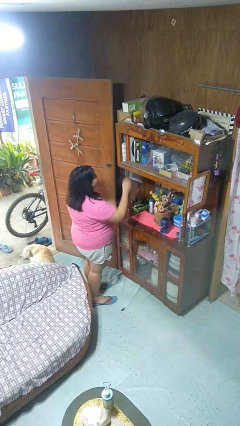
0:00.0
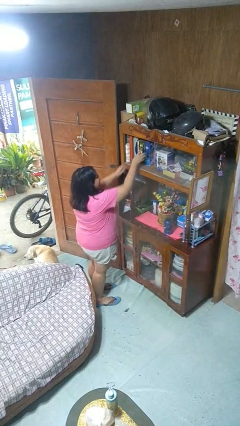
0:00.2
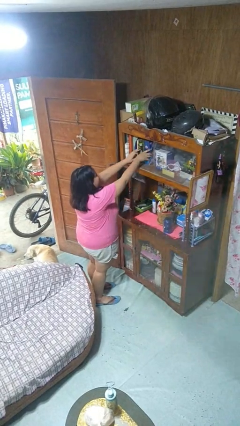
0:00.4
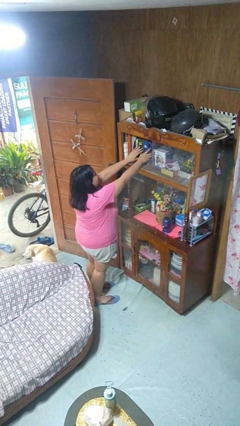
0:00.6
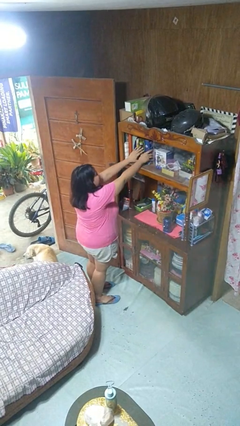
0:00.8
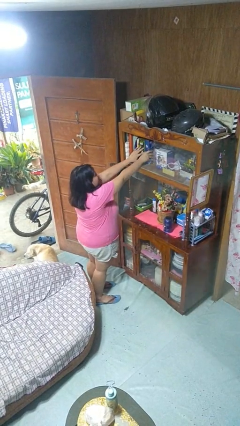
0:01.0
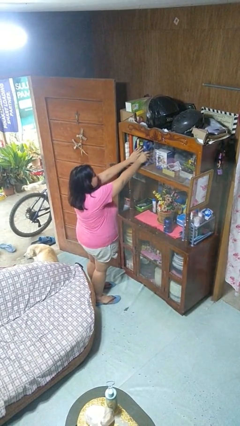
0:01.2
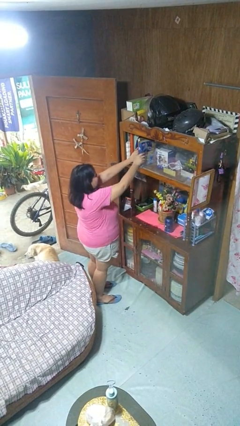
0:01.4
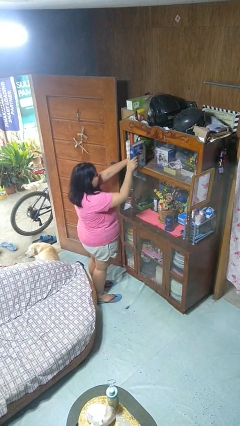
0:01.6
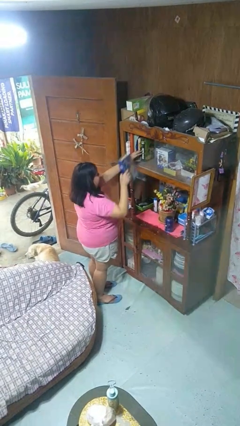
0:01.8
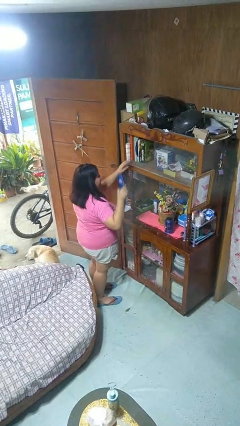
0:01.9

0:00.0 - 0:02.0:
person picks up object from shelf

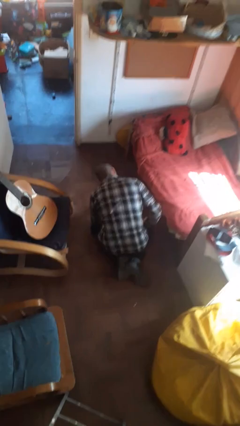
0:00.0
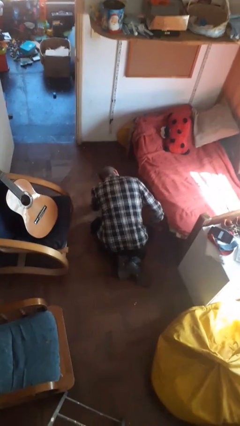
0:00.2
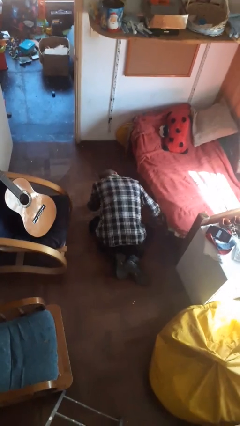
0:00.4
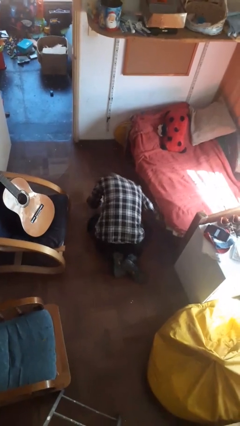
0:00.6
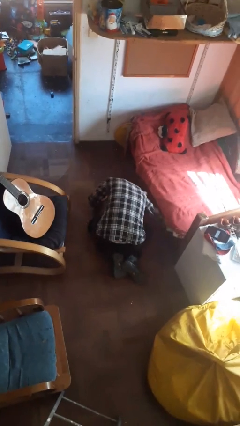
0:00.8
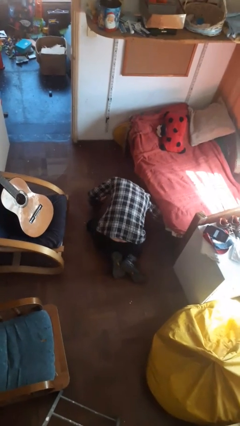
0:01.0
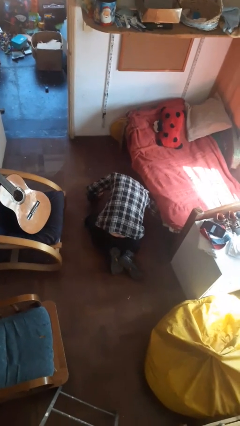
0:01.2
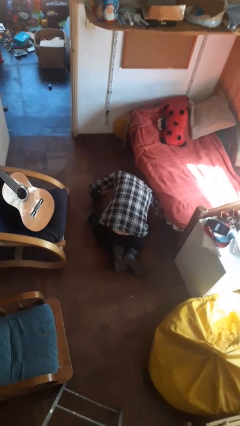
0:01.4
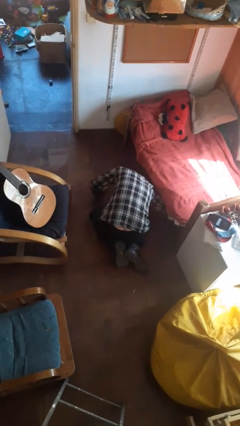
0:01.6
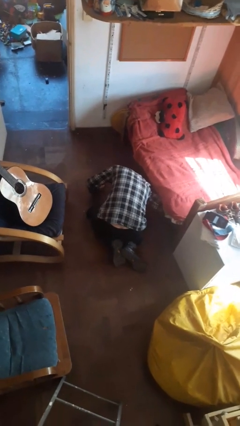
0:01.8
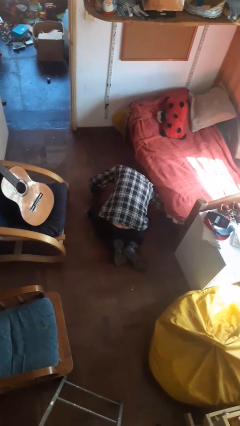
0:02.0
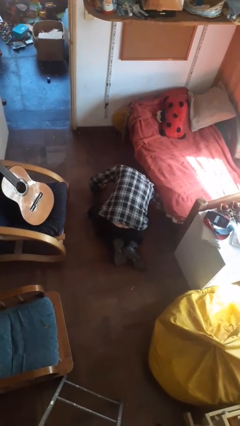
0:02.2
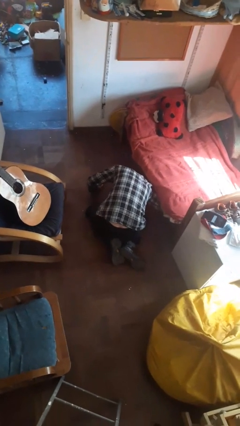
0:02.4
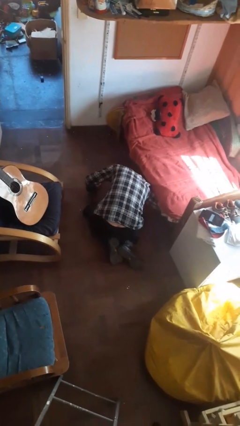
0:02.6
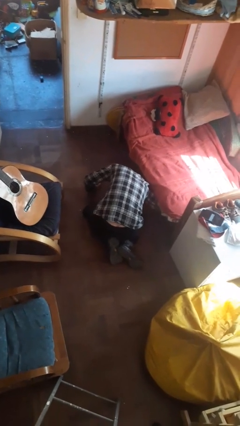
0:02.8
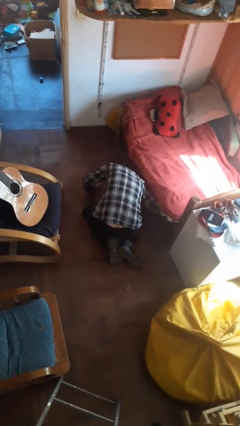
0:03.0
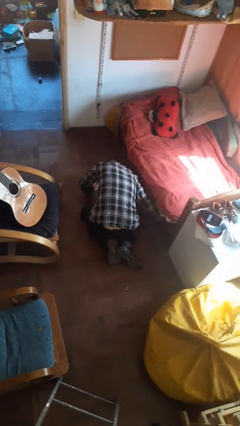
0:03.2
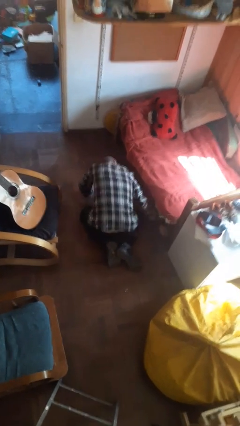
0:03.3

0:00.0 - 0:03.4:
person searches under bed

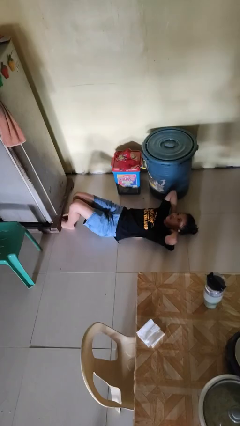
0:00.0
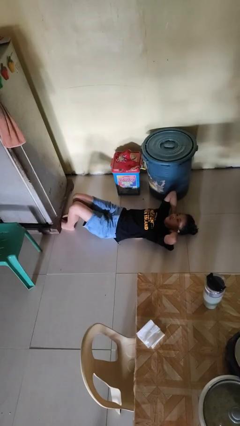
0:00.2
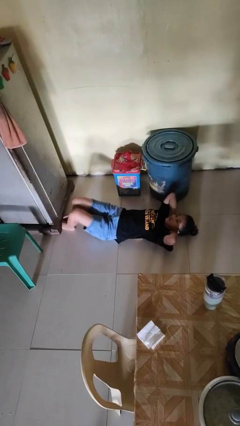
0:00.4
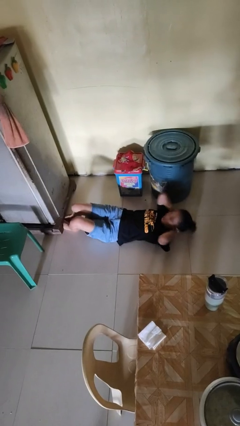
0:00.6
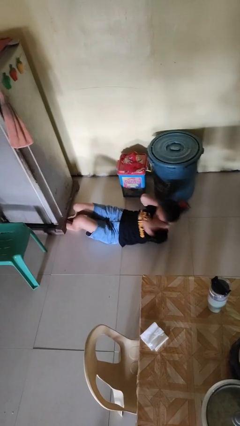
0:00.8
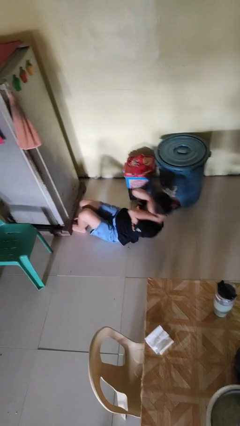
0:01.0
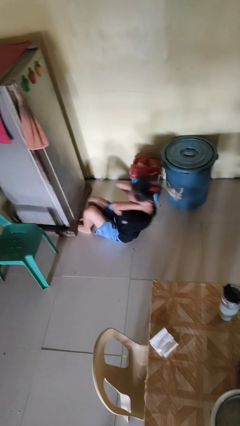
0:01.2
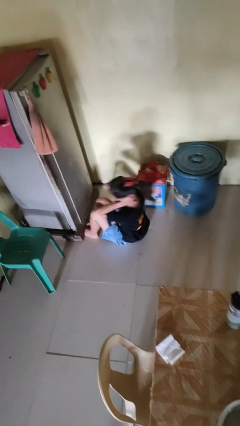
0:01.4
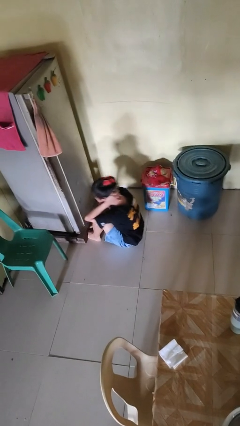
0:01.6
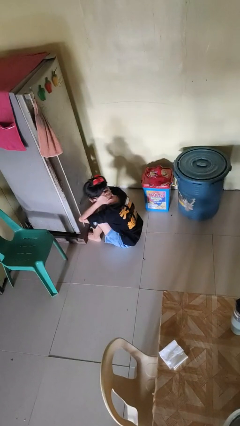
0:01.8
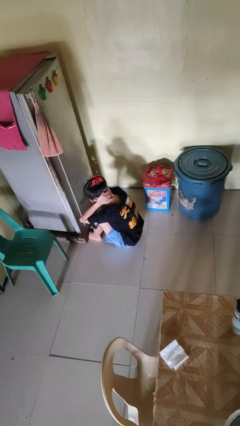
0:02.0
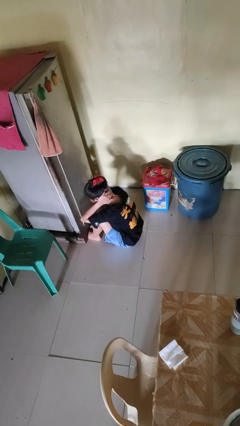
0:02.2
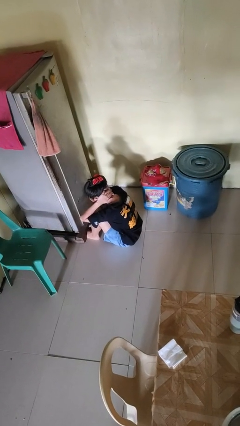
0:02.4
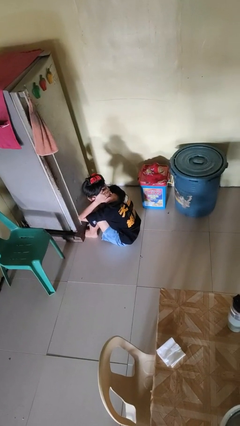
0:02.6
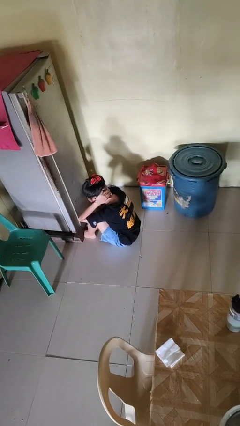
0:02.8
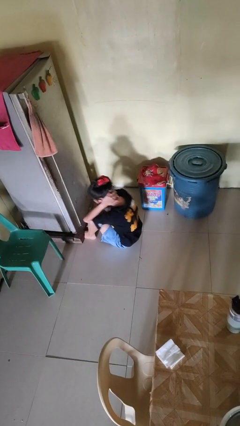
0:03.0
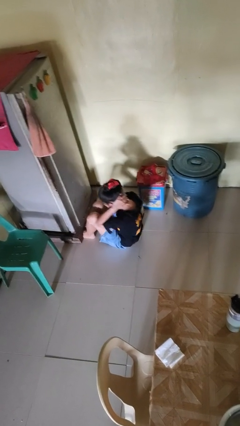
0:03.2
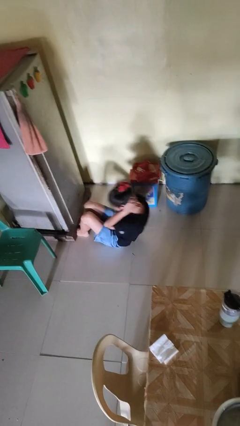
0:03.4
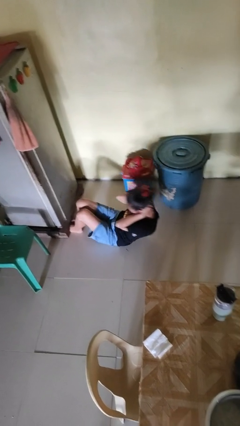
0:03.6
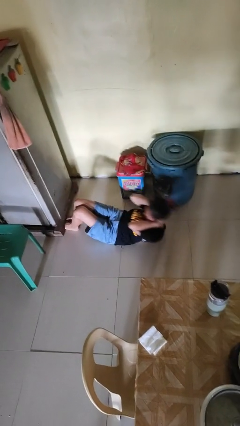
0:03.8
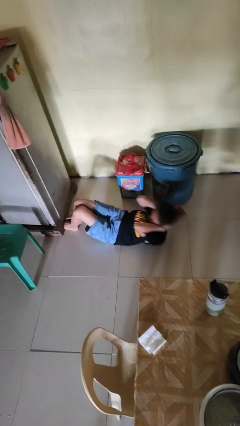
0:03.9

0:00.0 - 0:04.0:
person exercises with situp

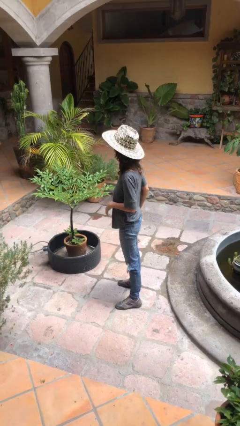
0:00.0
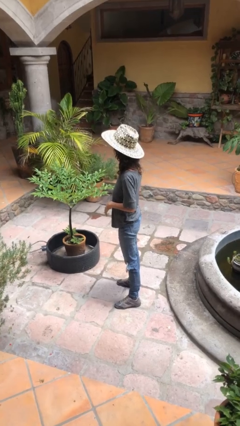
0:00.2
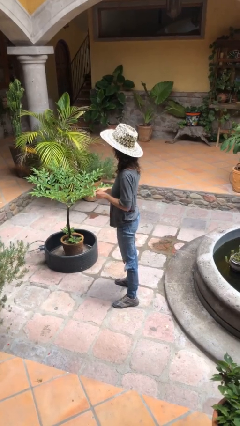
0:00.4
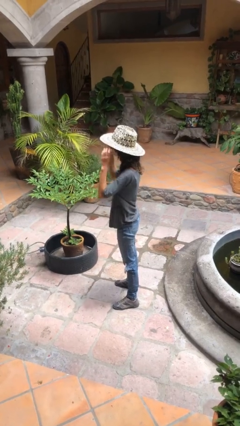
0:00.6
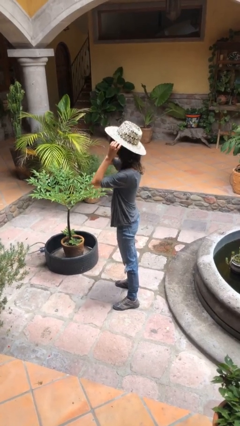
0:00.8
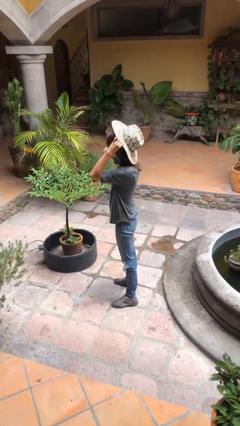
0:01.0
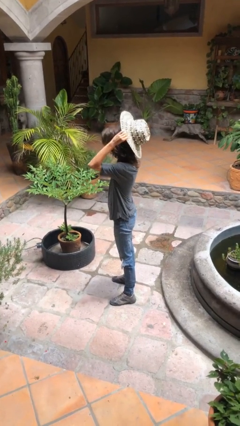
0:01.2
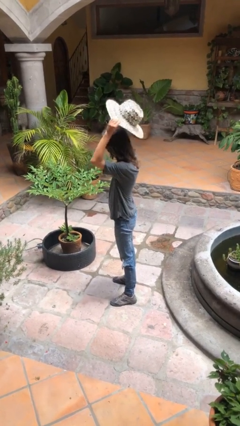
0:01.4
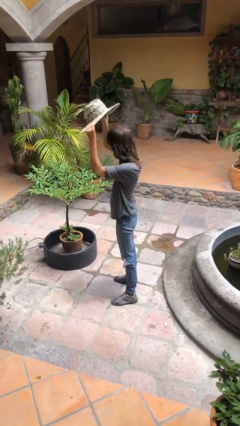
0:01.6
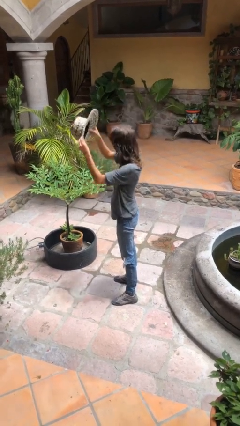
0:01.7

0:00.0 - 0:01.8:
person takes off hat

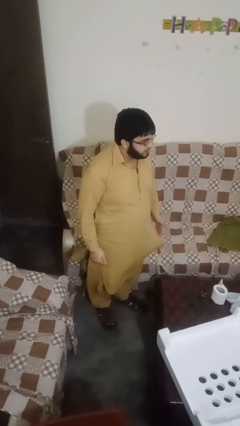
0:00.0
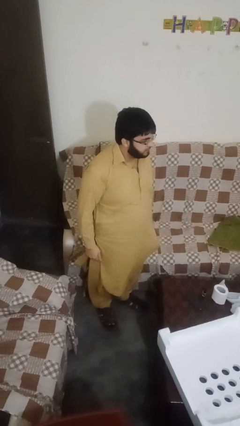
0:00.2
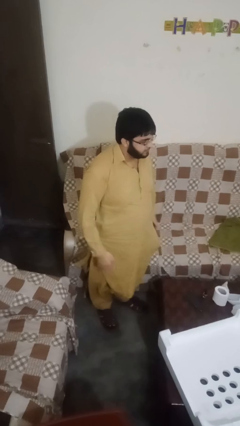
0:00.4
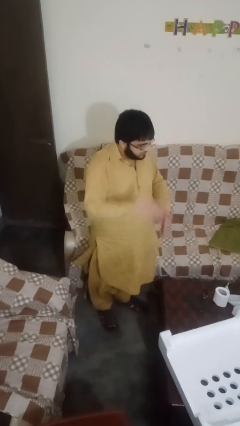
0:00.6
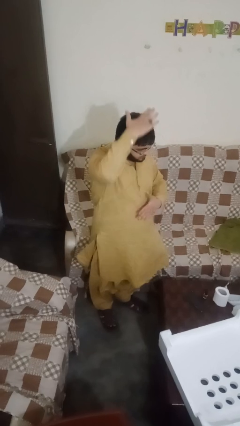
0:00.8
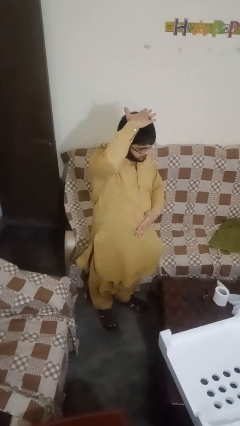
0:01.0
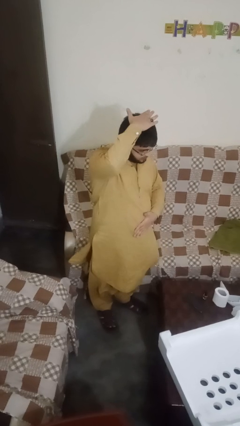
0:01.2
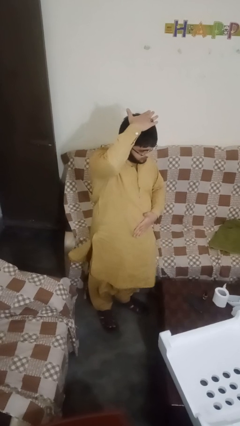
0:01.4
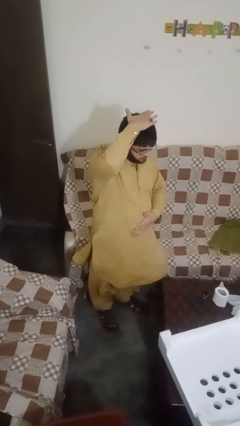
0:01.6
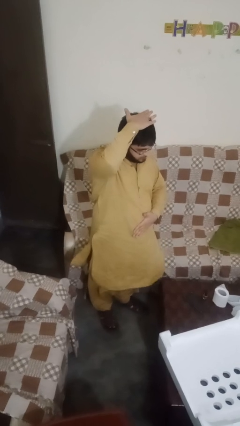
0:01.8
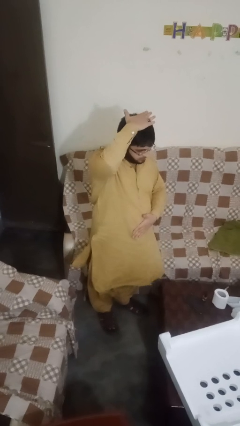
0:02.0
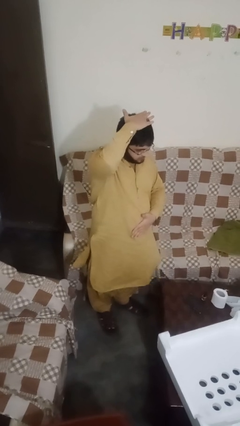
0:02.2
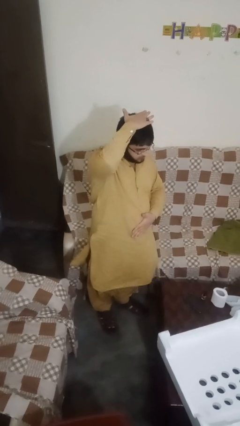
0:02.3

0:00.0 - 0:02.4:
person pats head

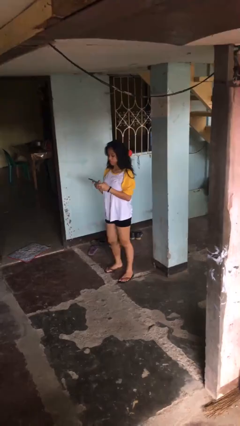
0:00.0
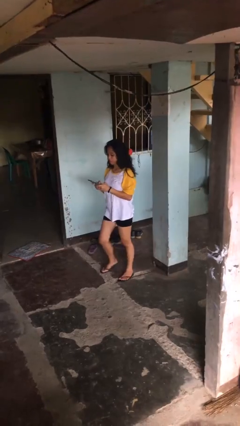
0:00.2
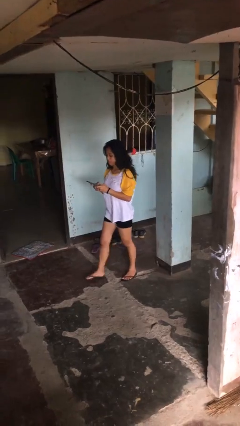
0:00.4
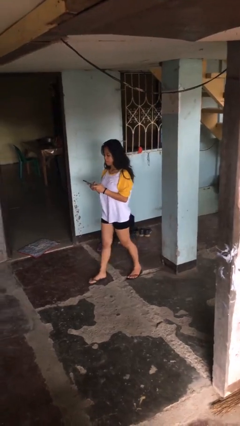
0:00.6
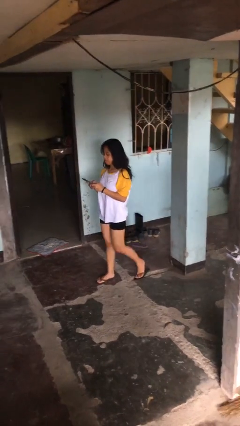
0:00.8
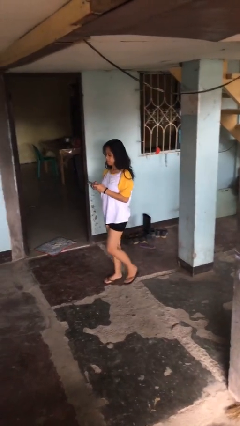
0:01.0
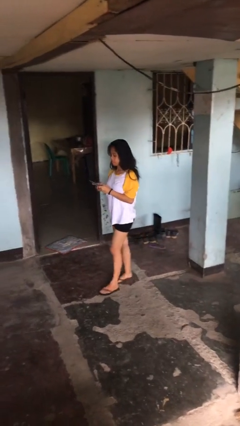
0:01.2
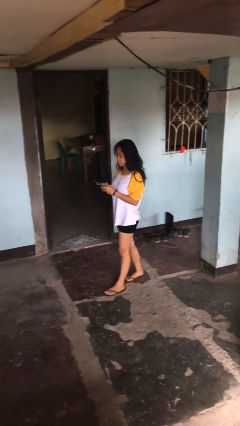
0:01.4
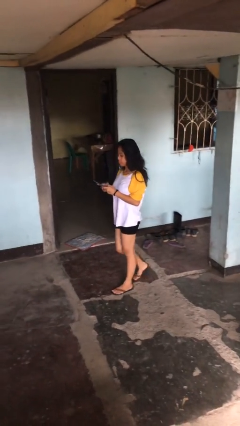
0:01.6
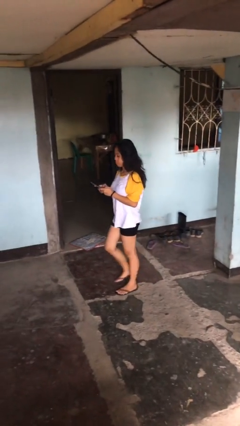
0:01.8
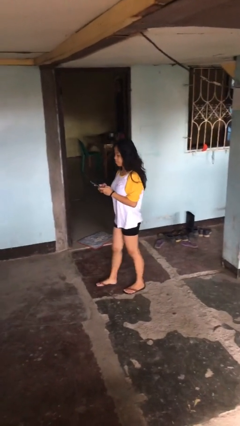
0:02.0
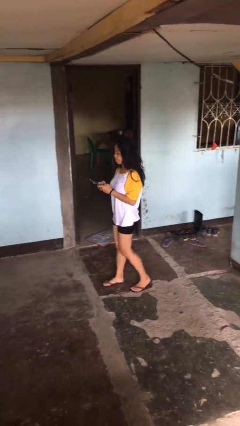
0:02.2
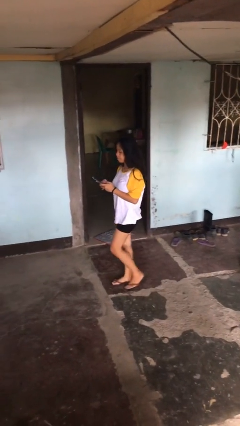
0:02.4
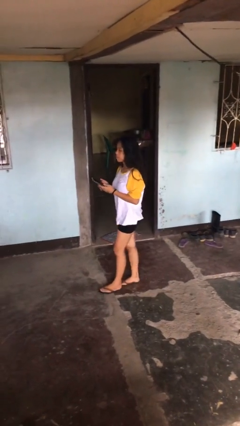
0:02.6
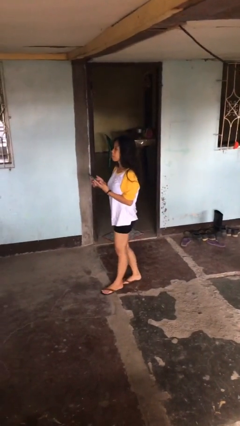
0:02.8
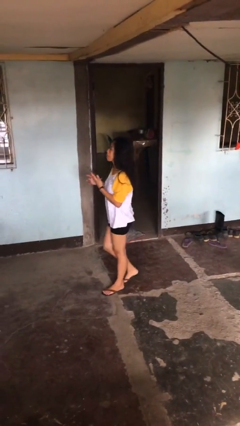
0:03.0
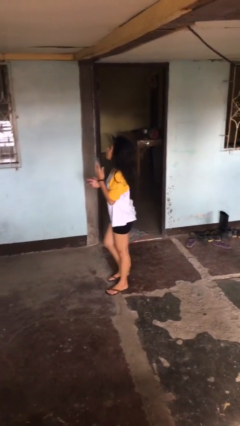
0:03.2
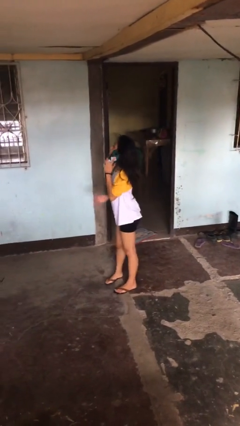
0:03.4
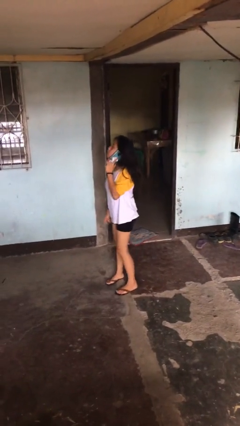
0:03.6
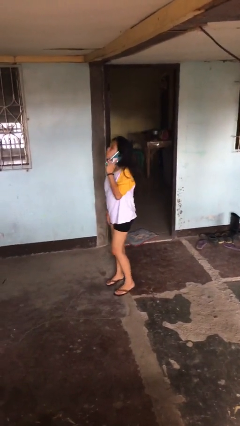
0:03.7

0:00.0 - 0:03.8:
person texts on phone
